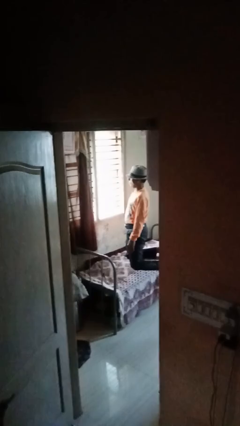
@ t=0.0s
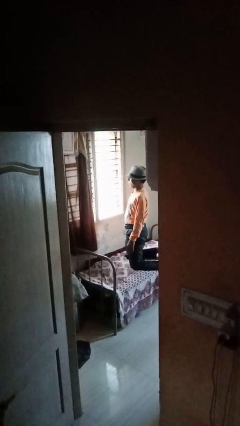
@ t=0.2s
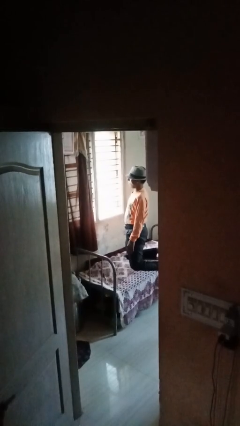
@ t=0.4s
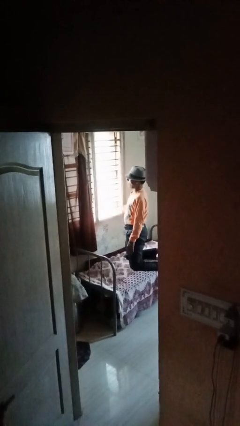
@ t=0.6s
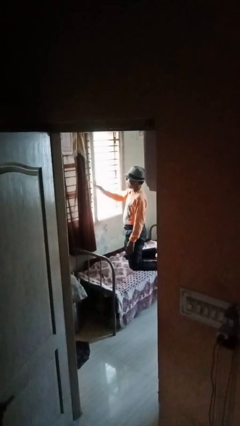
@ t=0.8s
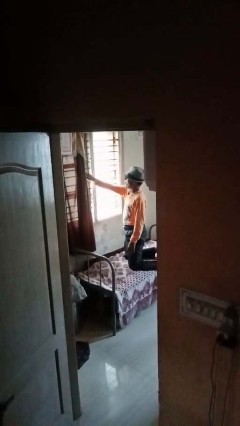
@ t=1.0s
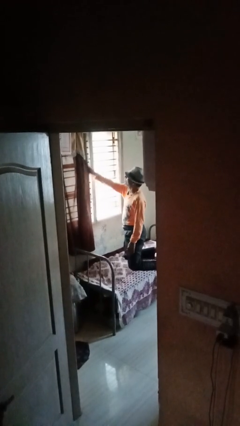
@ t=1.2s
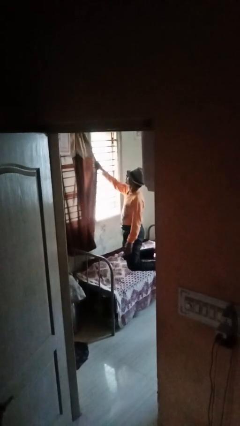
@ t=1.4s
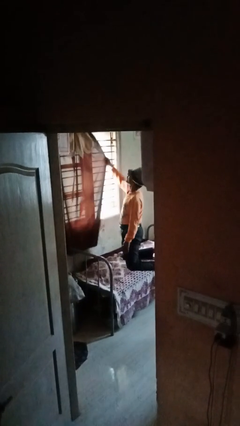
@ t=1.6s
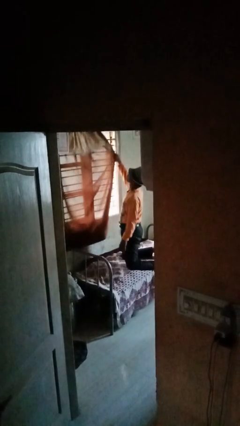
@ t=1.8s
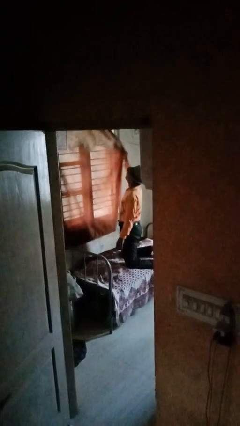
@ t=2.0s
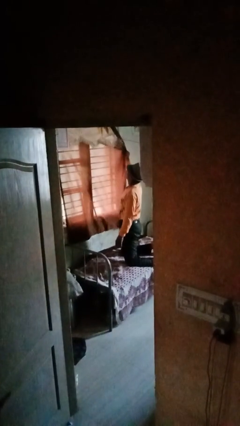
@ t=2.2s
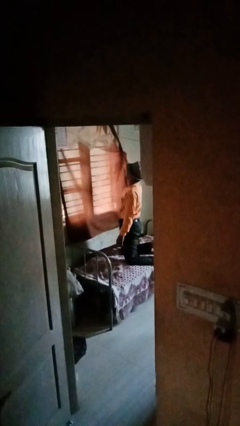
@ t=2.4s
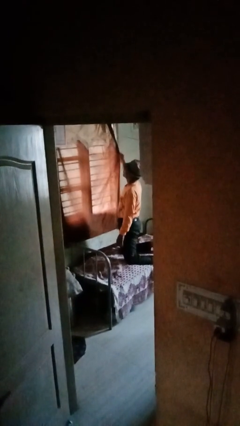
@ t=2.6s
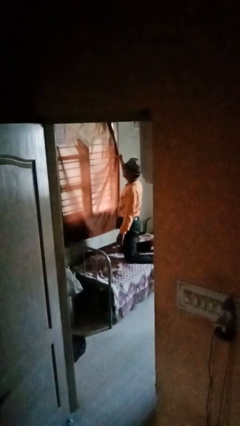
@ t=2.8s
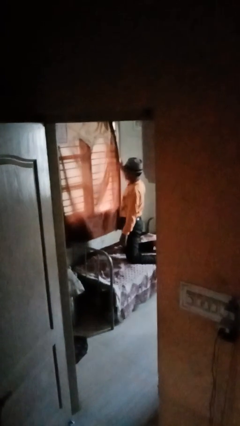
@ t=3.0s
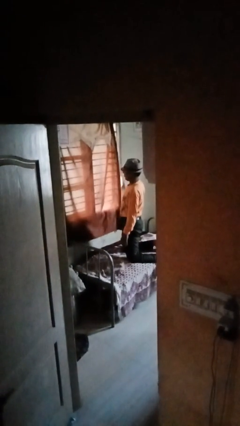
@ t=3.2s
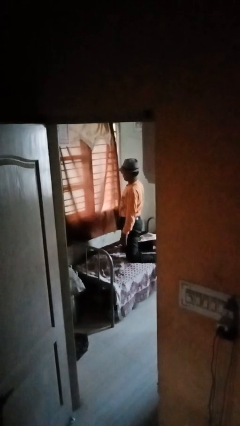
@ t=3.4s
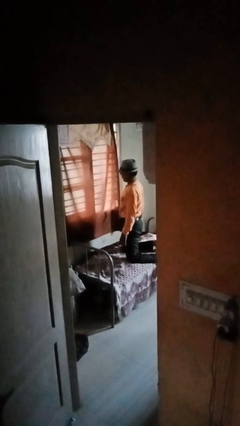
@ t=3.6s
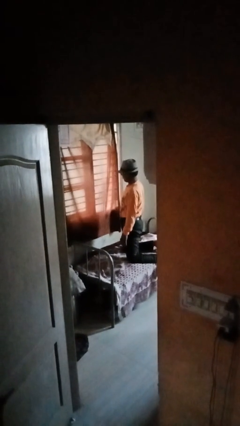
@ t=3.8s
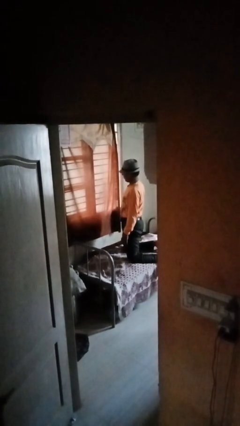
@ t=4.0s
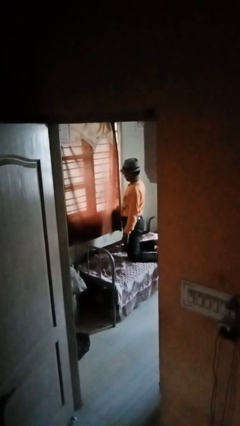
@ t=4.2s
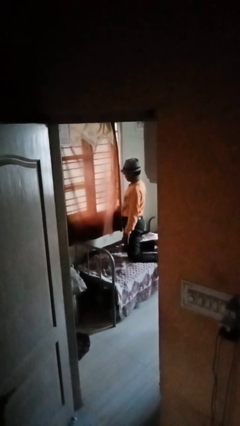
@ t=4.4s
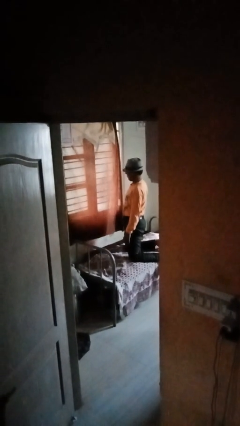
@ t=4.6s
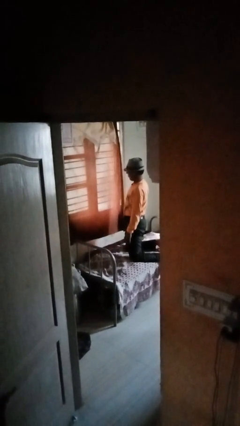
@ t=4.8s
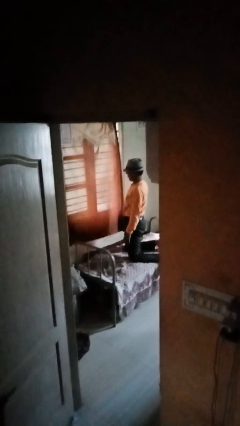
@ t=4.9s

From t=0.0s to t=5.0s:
person closes curtains

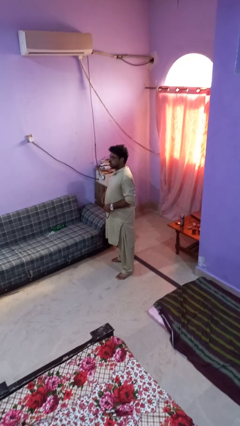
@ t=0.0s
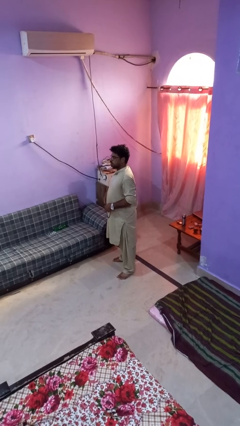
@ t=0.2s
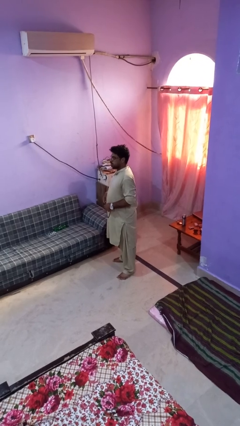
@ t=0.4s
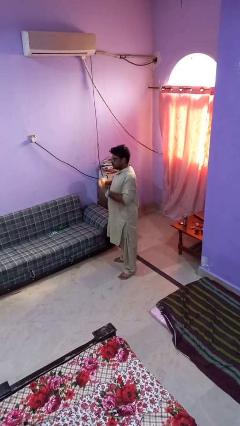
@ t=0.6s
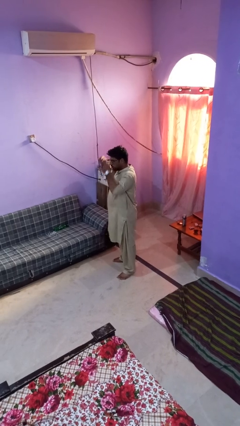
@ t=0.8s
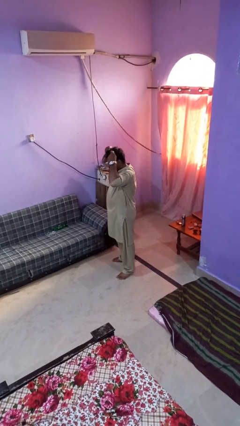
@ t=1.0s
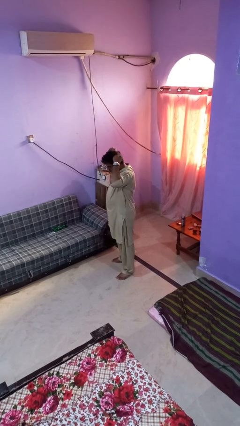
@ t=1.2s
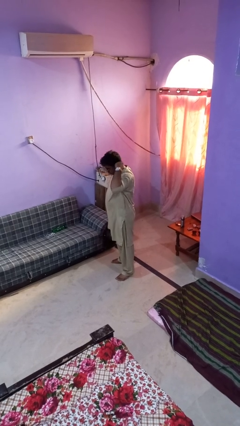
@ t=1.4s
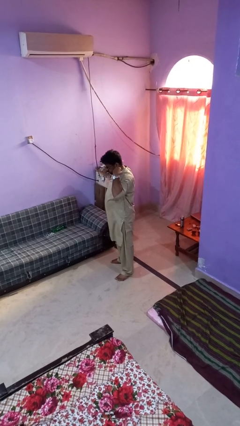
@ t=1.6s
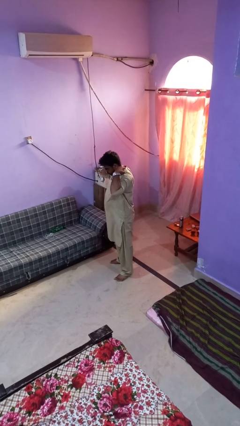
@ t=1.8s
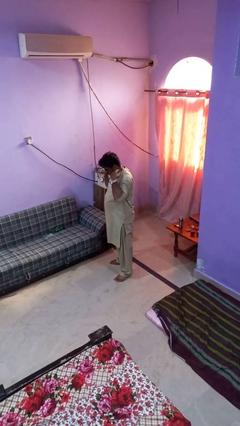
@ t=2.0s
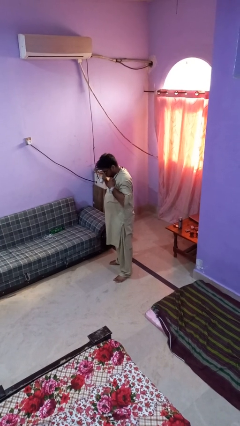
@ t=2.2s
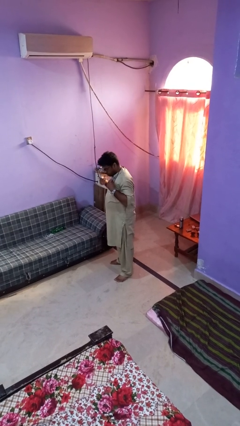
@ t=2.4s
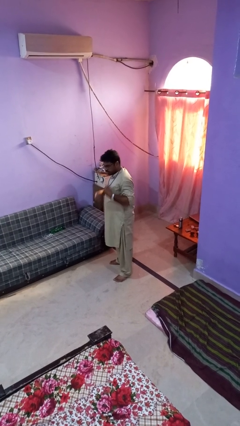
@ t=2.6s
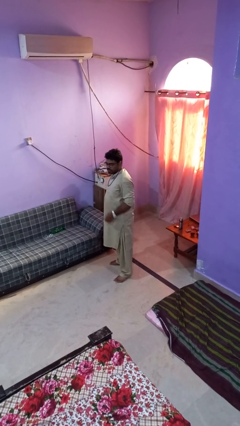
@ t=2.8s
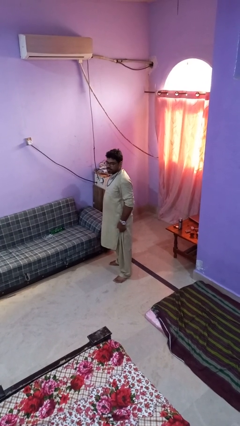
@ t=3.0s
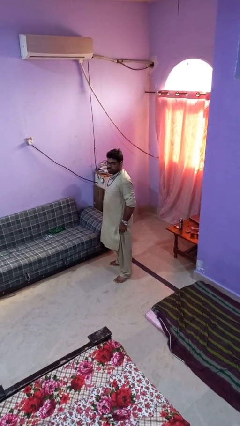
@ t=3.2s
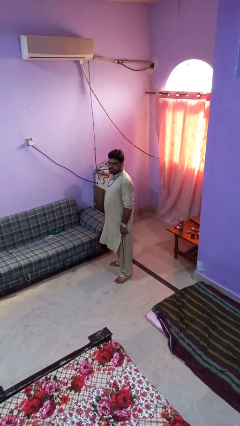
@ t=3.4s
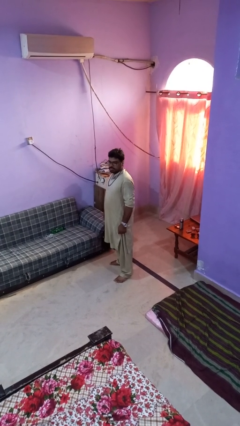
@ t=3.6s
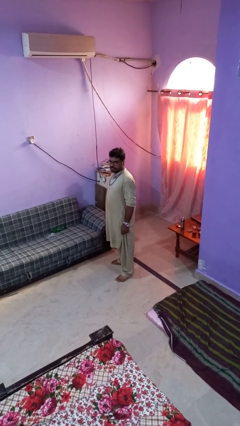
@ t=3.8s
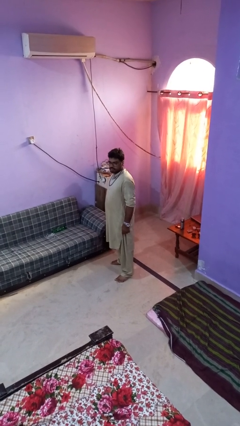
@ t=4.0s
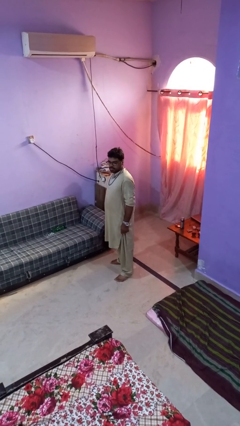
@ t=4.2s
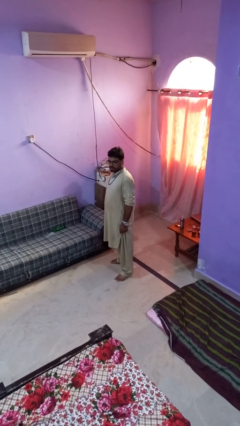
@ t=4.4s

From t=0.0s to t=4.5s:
person puts on necklace

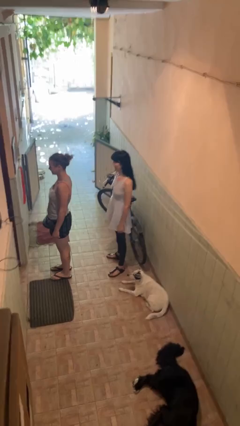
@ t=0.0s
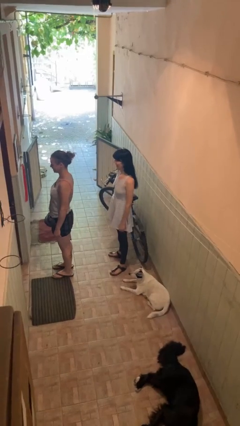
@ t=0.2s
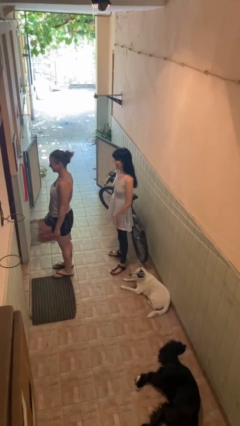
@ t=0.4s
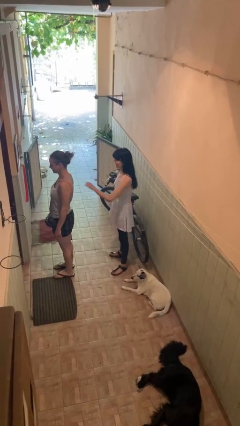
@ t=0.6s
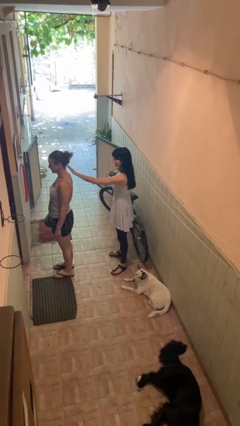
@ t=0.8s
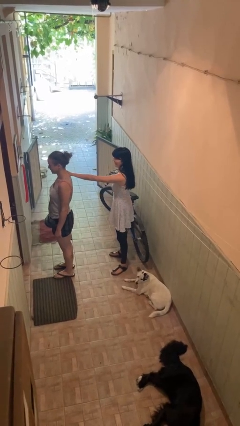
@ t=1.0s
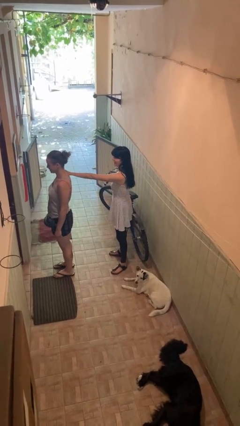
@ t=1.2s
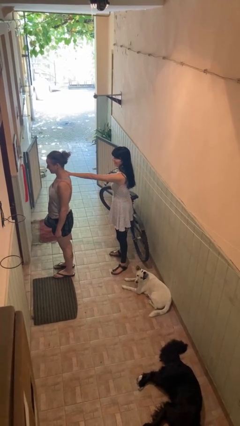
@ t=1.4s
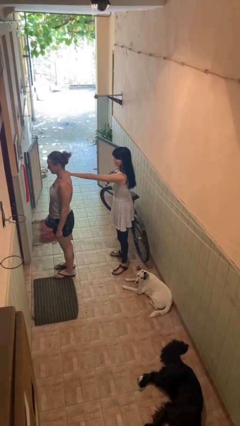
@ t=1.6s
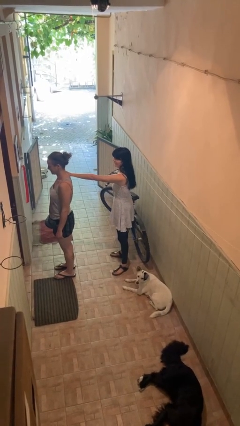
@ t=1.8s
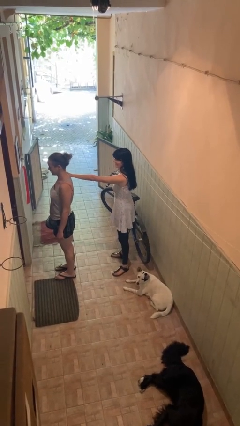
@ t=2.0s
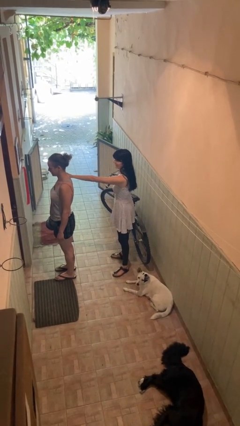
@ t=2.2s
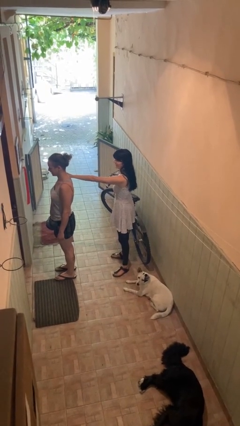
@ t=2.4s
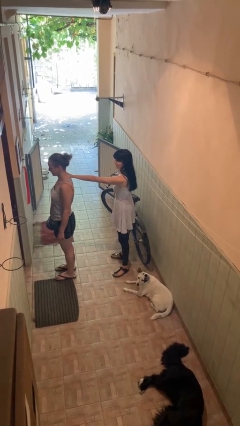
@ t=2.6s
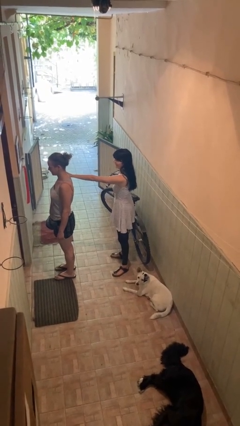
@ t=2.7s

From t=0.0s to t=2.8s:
person grabs person by shoulder

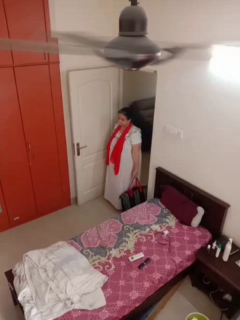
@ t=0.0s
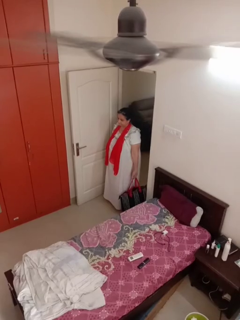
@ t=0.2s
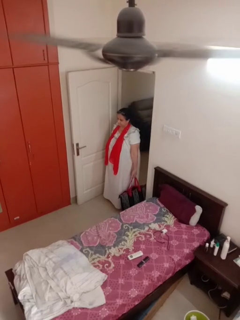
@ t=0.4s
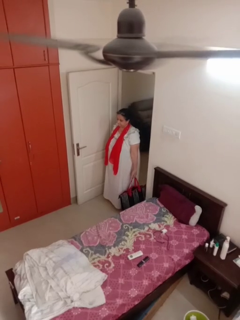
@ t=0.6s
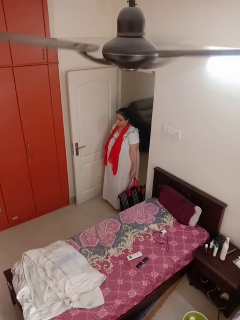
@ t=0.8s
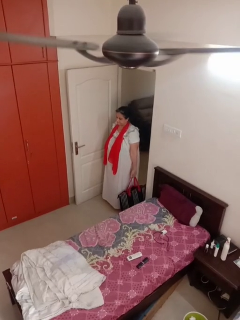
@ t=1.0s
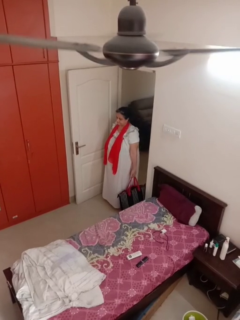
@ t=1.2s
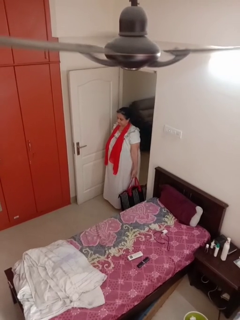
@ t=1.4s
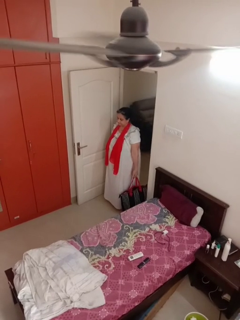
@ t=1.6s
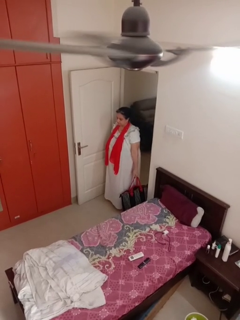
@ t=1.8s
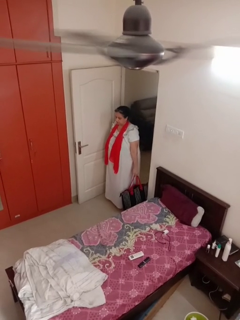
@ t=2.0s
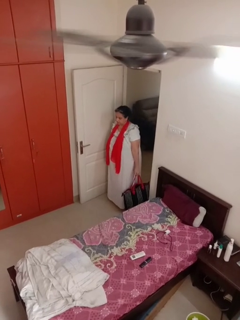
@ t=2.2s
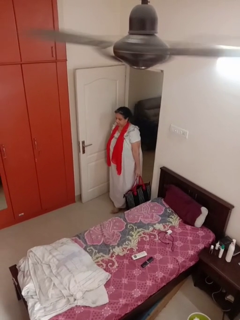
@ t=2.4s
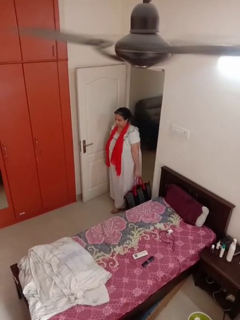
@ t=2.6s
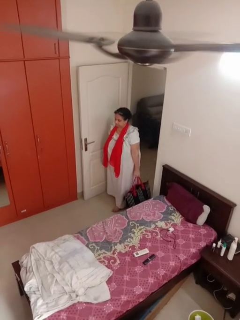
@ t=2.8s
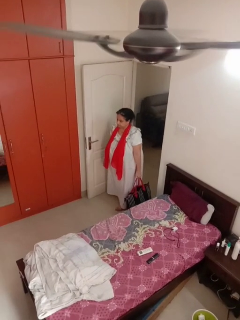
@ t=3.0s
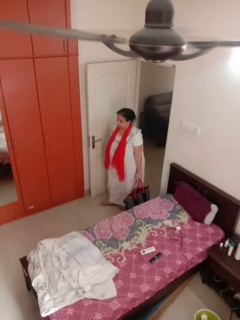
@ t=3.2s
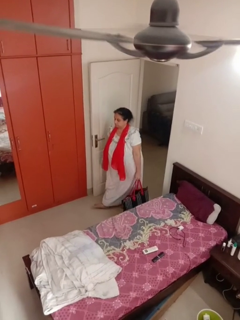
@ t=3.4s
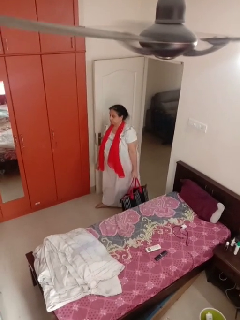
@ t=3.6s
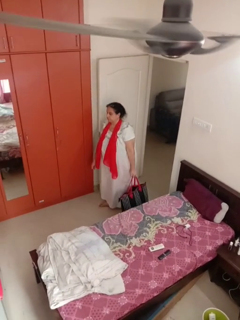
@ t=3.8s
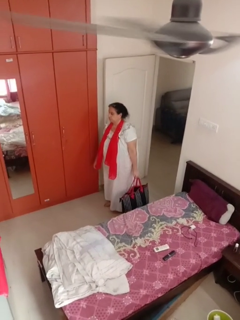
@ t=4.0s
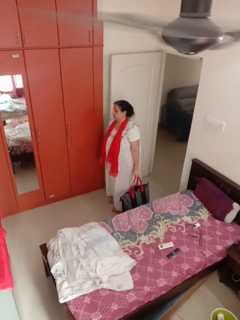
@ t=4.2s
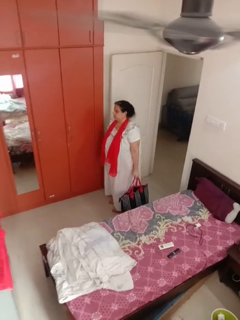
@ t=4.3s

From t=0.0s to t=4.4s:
person carries groceries

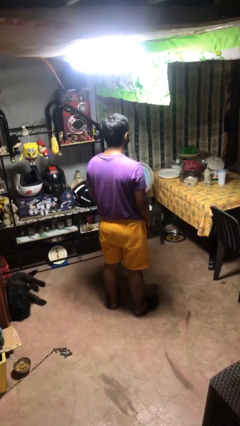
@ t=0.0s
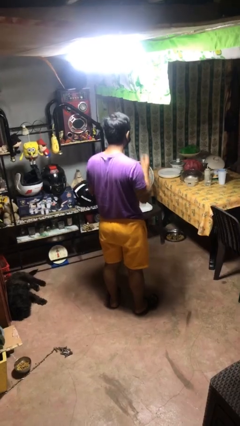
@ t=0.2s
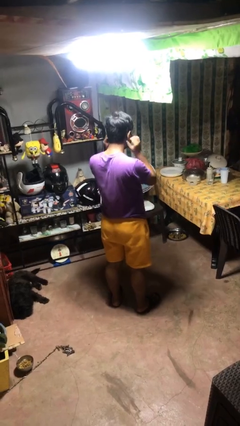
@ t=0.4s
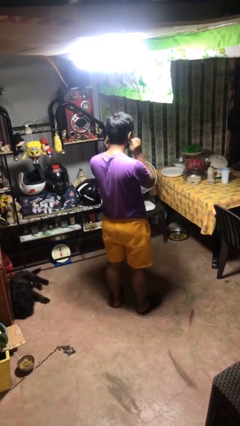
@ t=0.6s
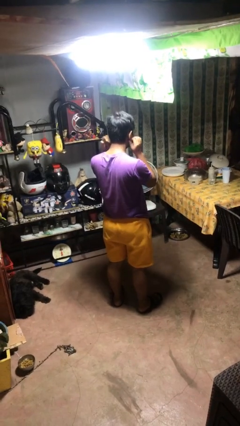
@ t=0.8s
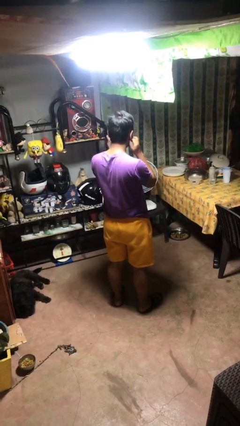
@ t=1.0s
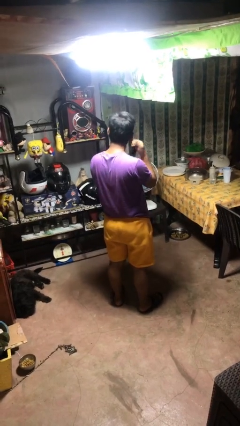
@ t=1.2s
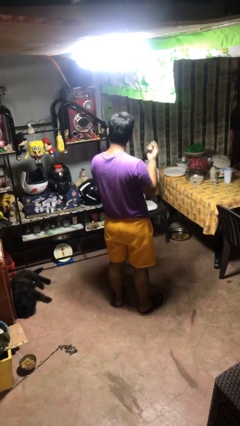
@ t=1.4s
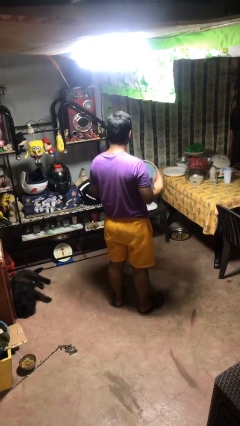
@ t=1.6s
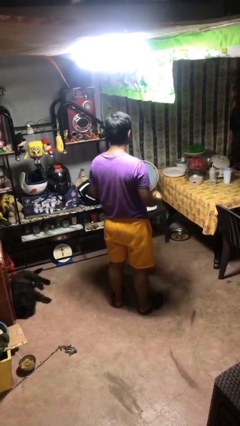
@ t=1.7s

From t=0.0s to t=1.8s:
person takes off facemask

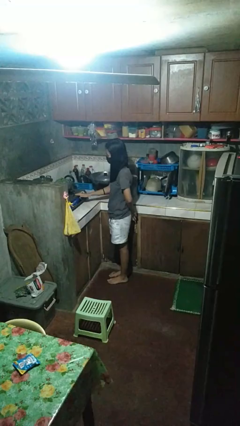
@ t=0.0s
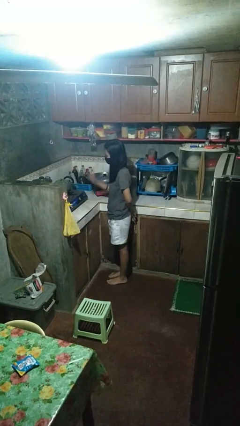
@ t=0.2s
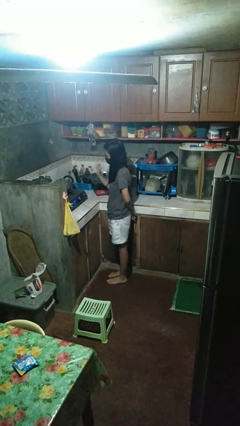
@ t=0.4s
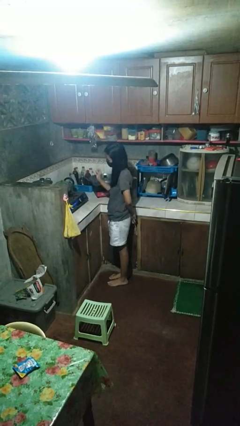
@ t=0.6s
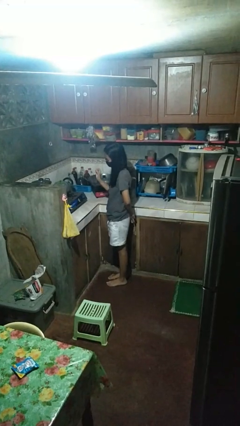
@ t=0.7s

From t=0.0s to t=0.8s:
person burns hand
